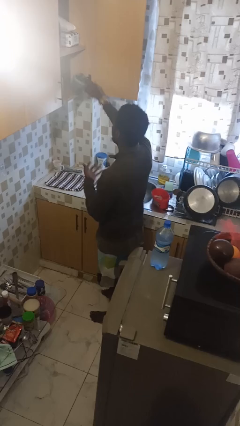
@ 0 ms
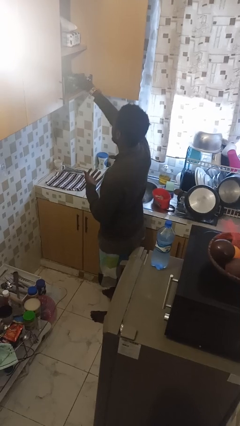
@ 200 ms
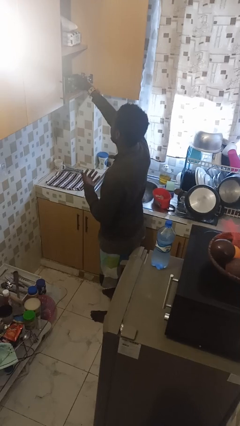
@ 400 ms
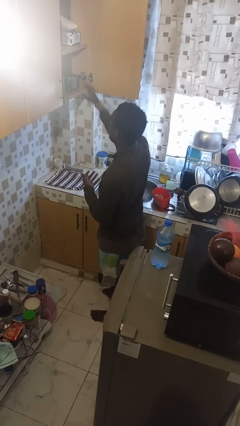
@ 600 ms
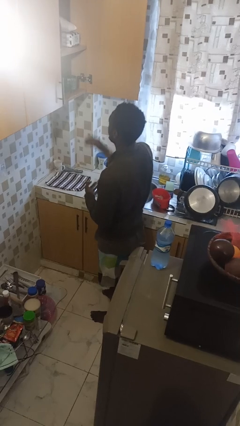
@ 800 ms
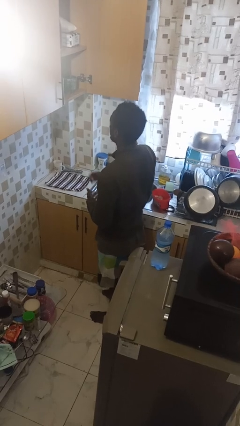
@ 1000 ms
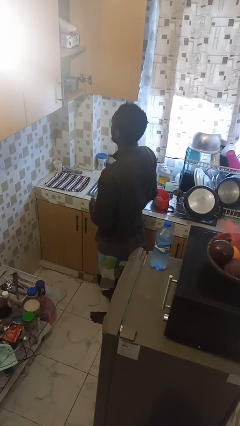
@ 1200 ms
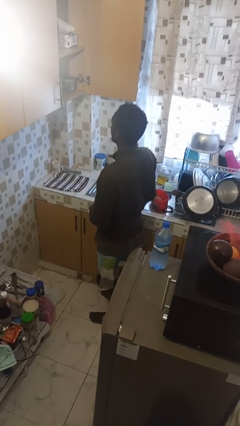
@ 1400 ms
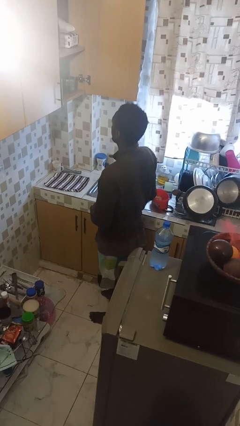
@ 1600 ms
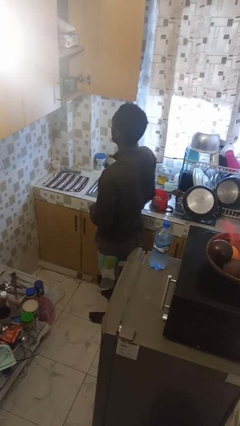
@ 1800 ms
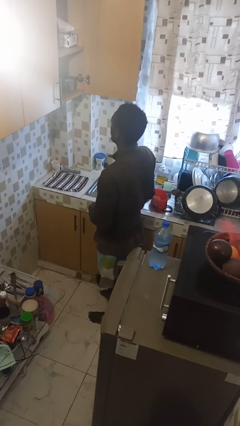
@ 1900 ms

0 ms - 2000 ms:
person puts down object into cabinet

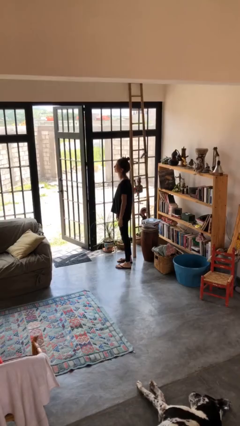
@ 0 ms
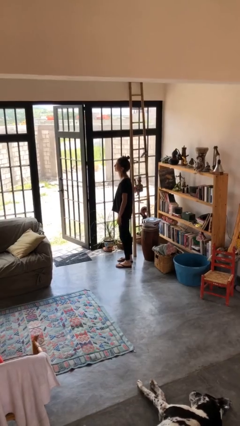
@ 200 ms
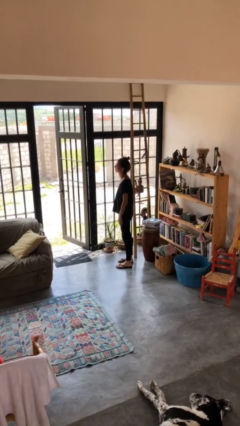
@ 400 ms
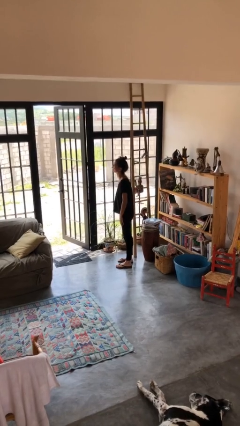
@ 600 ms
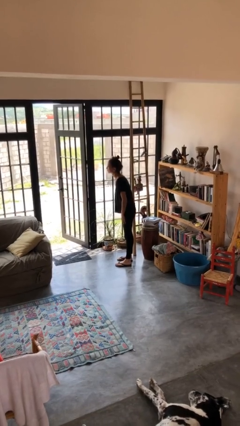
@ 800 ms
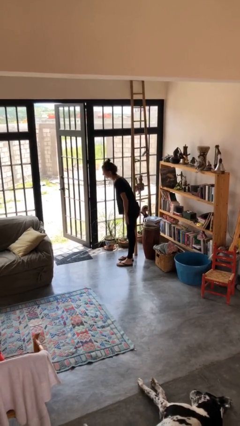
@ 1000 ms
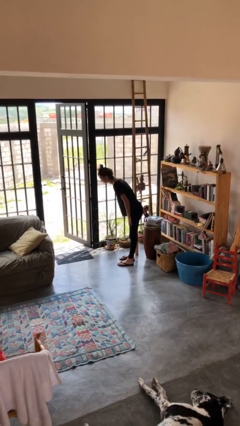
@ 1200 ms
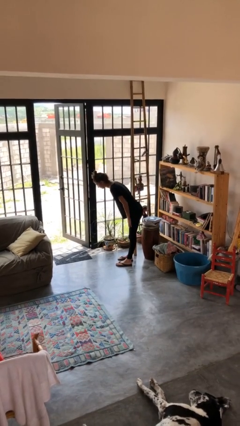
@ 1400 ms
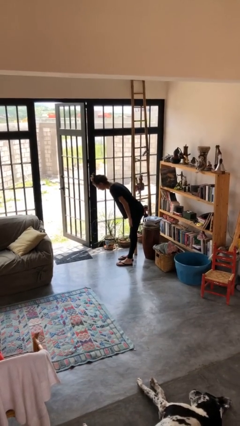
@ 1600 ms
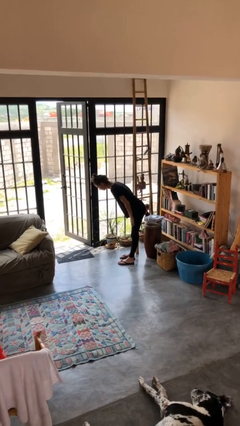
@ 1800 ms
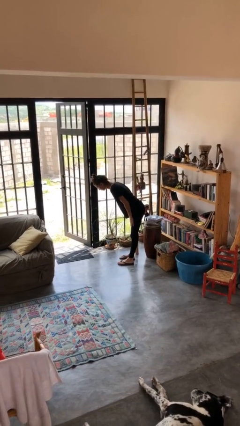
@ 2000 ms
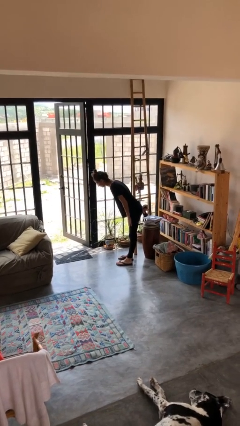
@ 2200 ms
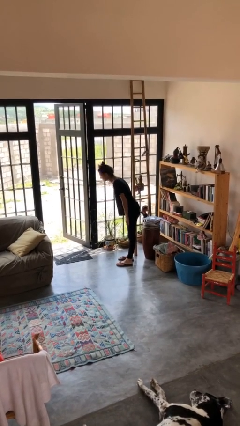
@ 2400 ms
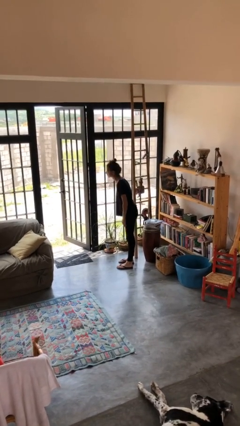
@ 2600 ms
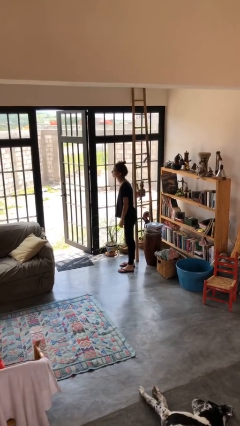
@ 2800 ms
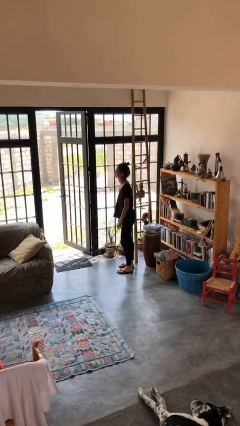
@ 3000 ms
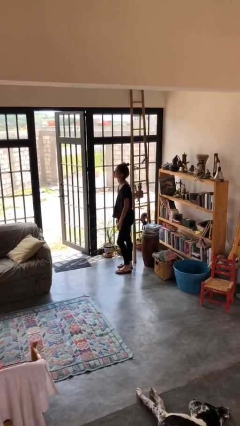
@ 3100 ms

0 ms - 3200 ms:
person bows

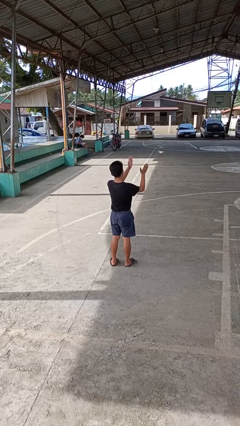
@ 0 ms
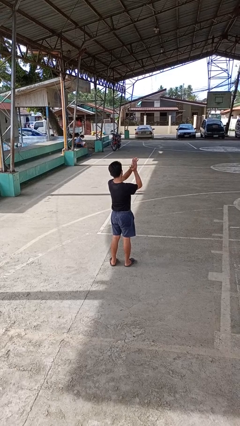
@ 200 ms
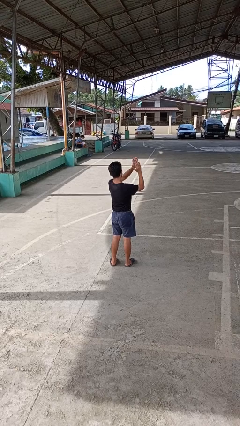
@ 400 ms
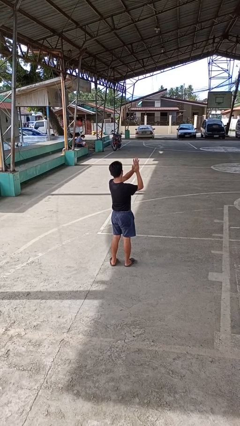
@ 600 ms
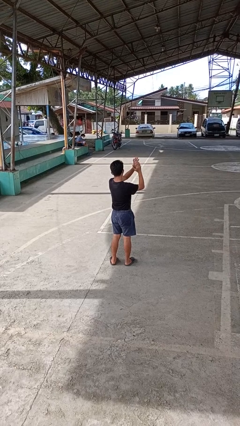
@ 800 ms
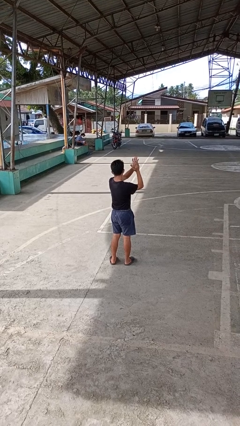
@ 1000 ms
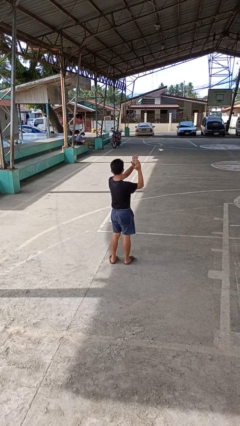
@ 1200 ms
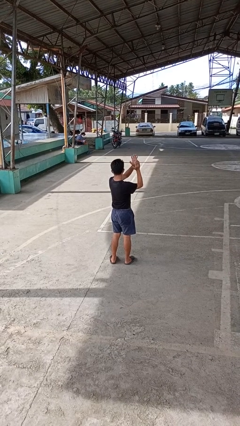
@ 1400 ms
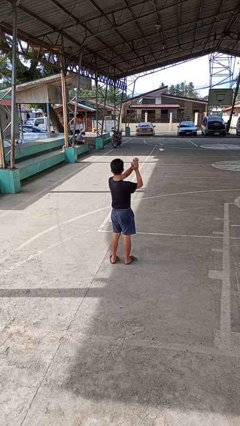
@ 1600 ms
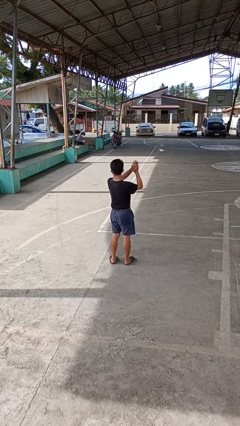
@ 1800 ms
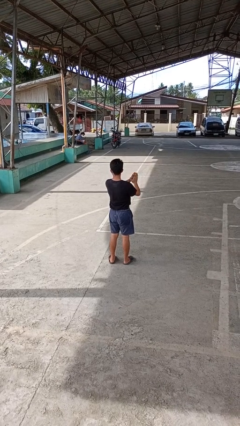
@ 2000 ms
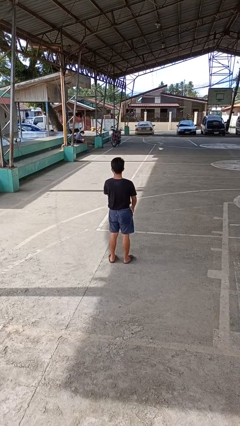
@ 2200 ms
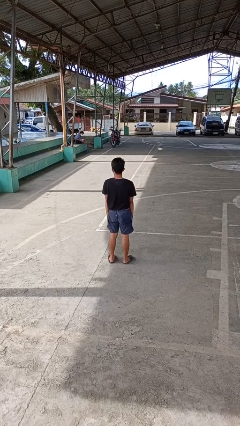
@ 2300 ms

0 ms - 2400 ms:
person claps hands

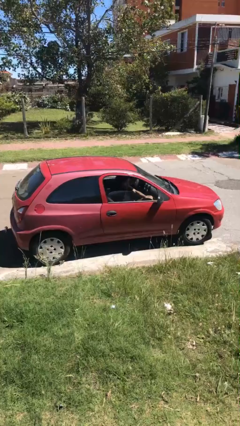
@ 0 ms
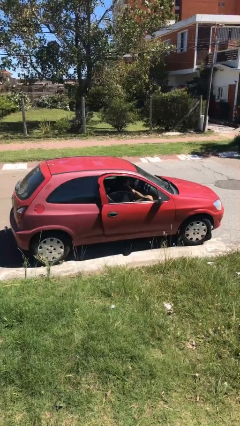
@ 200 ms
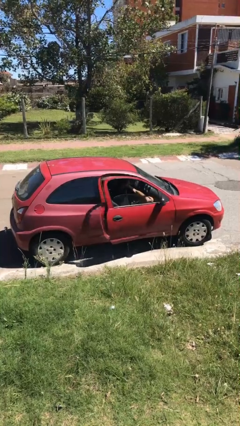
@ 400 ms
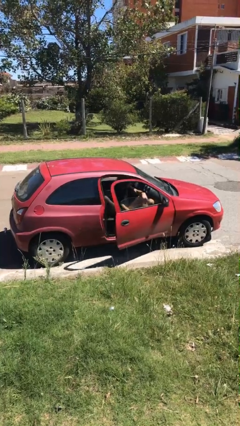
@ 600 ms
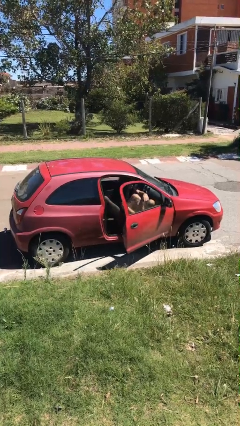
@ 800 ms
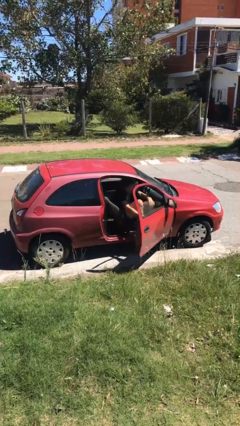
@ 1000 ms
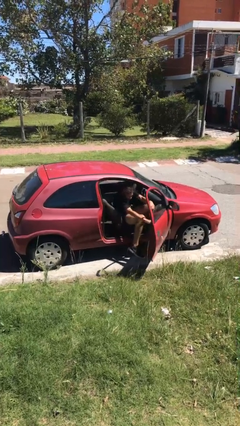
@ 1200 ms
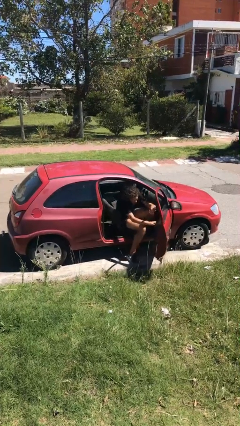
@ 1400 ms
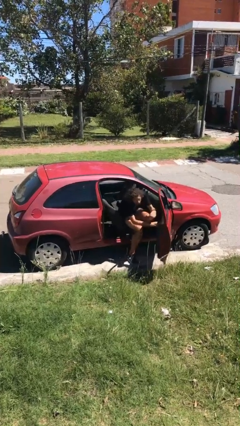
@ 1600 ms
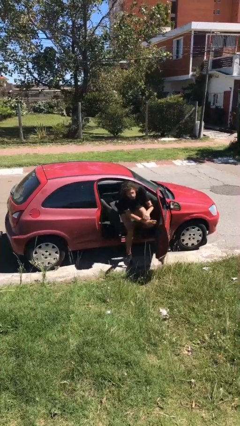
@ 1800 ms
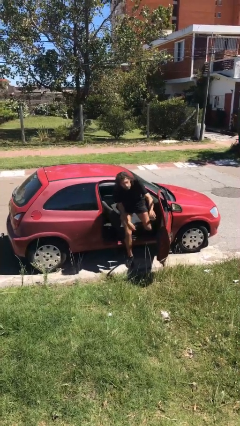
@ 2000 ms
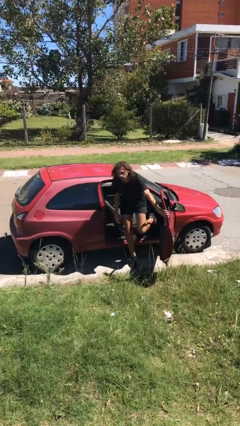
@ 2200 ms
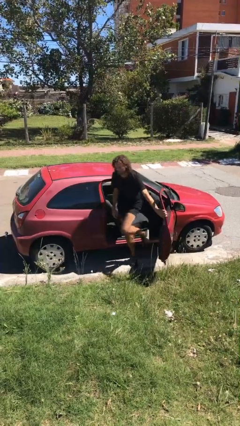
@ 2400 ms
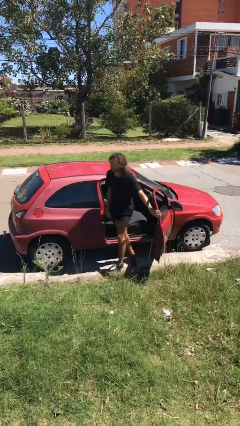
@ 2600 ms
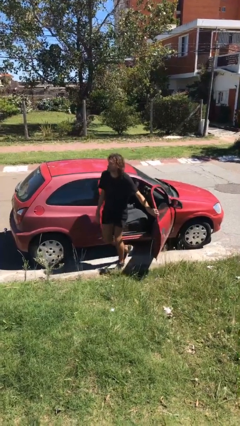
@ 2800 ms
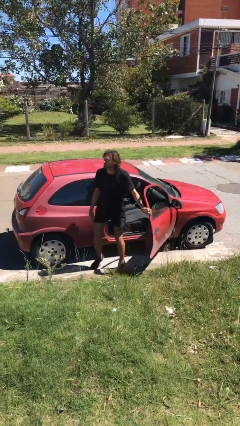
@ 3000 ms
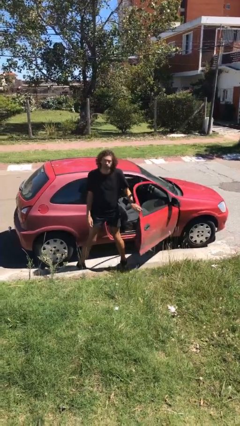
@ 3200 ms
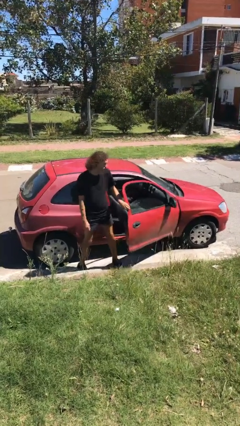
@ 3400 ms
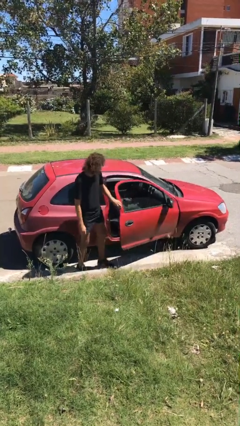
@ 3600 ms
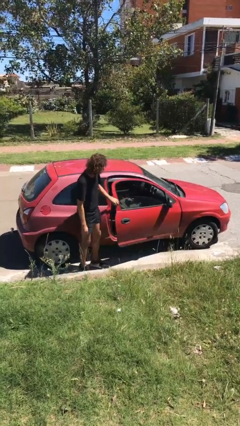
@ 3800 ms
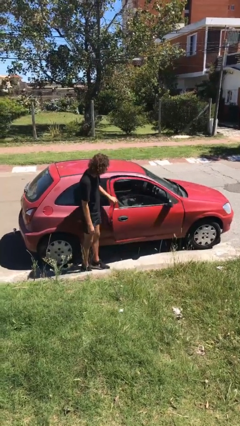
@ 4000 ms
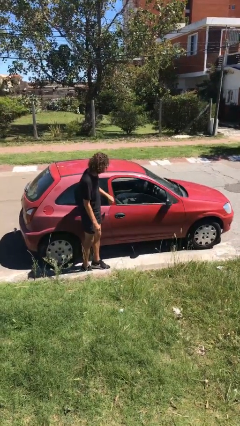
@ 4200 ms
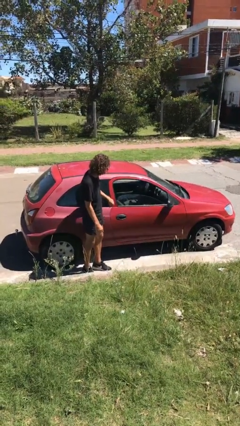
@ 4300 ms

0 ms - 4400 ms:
car drops off person

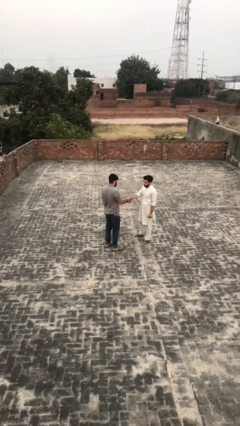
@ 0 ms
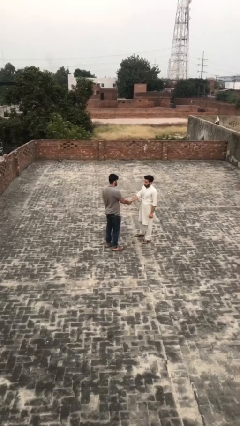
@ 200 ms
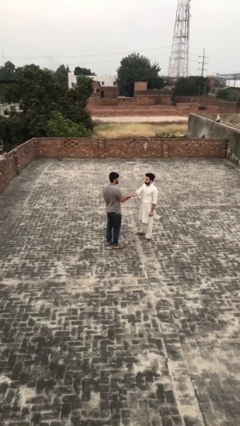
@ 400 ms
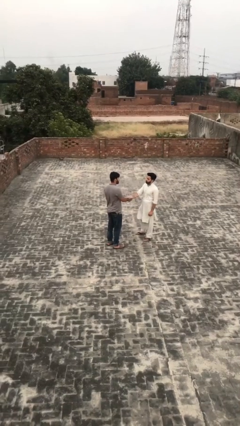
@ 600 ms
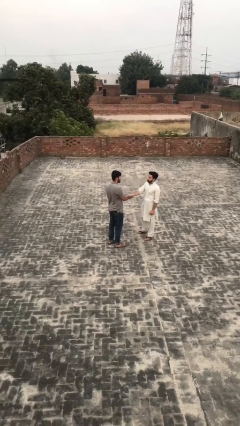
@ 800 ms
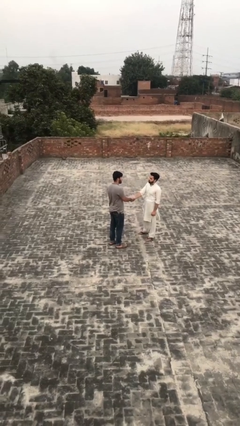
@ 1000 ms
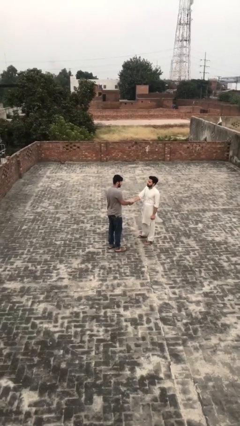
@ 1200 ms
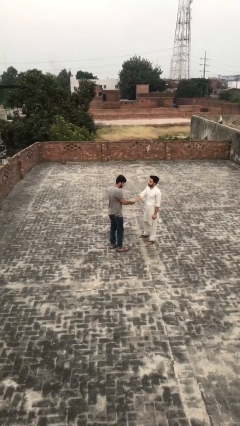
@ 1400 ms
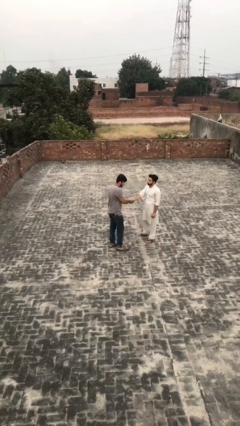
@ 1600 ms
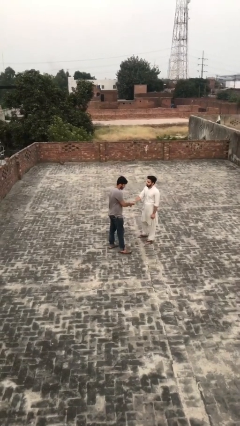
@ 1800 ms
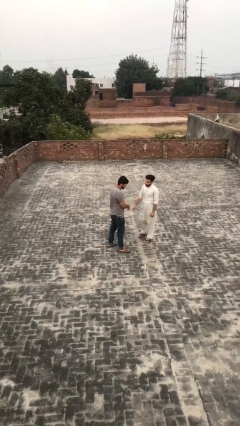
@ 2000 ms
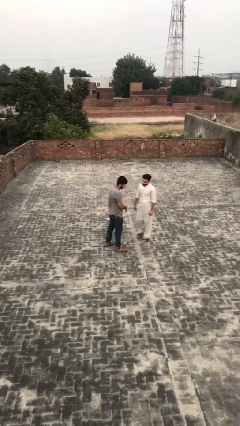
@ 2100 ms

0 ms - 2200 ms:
person shakes hand

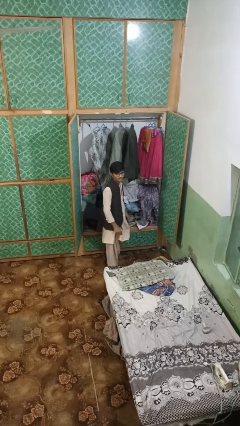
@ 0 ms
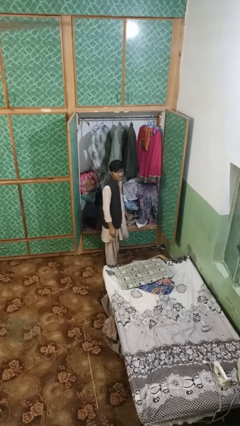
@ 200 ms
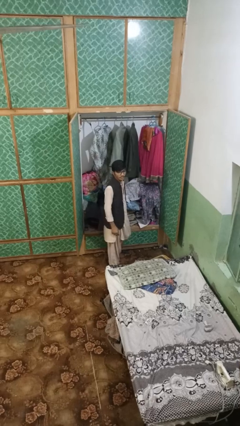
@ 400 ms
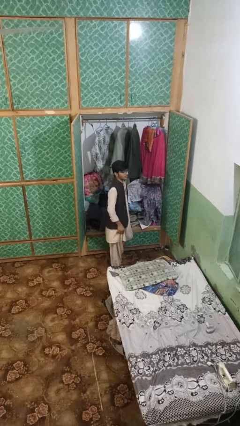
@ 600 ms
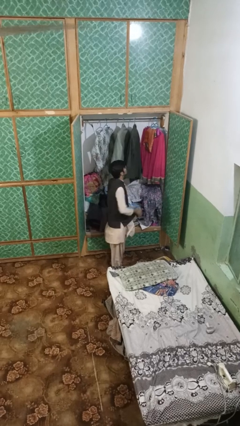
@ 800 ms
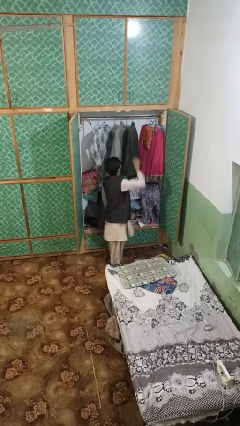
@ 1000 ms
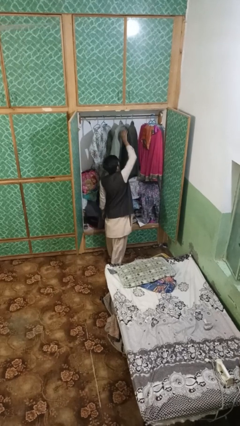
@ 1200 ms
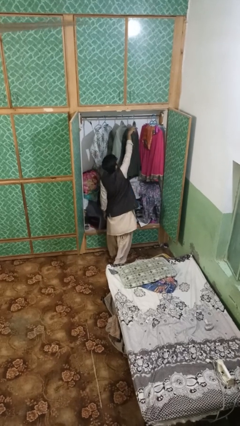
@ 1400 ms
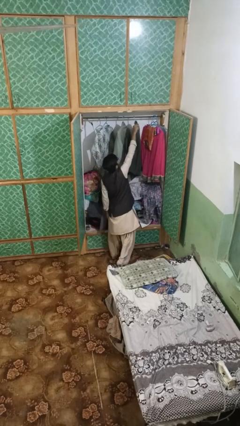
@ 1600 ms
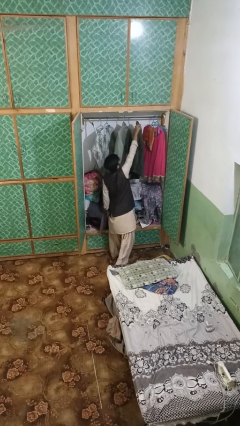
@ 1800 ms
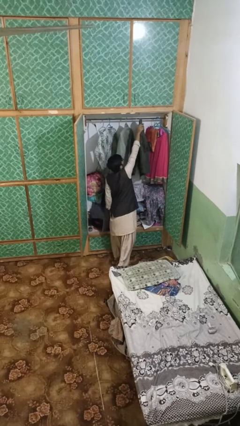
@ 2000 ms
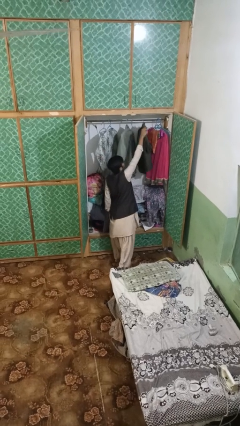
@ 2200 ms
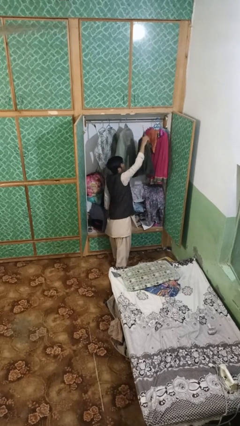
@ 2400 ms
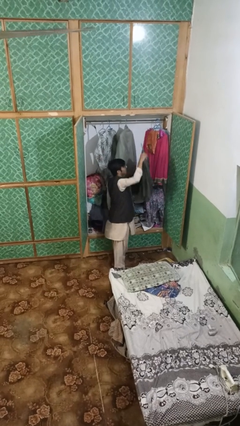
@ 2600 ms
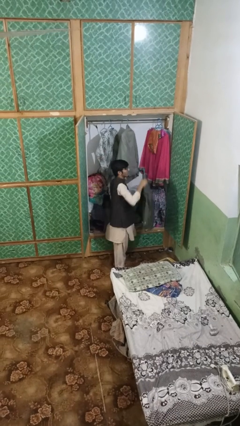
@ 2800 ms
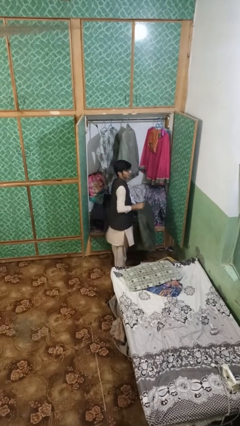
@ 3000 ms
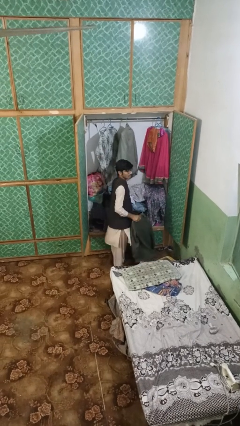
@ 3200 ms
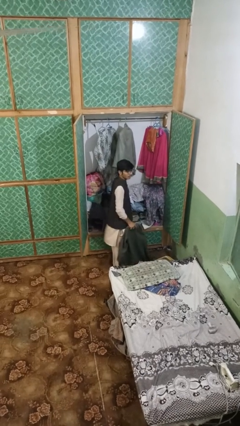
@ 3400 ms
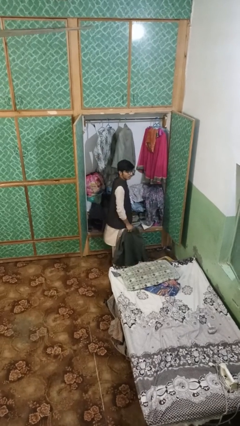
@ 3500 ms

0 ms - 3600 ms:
person takes clothes from closet
